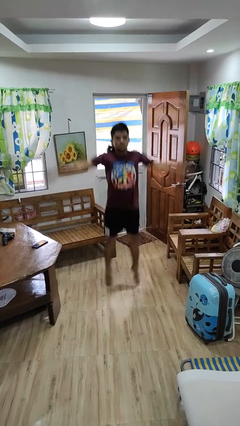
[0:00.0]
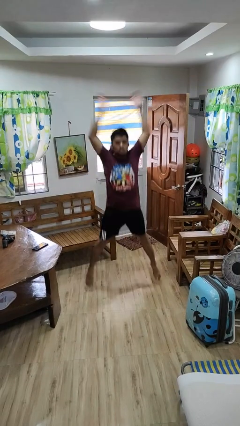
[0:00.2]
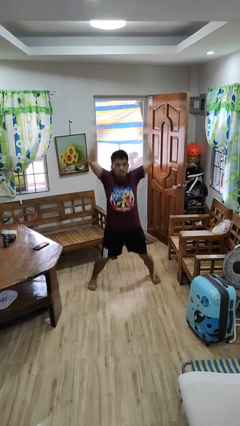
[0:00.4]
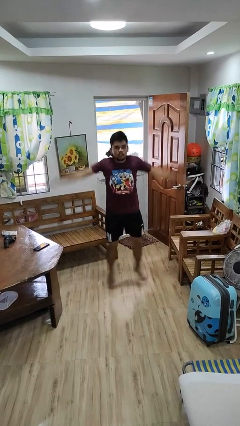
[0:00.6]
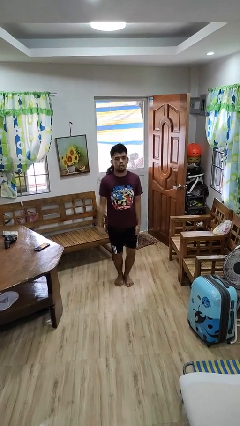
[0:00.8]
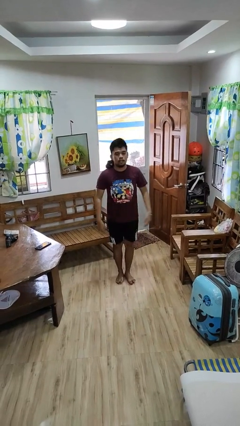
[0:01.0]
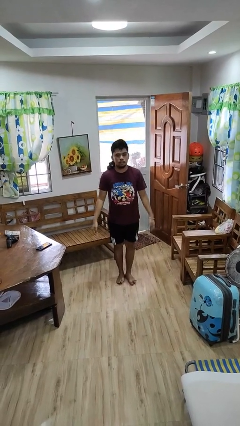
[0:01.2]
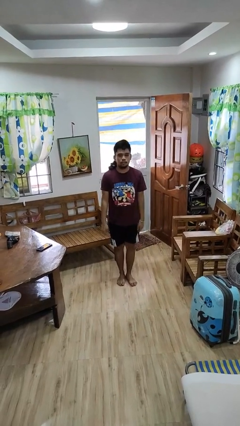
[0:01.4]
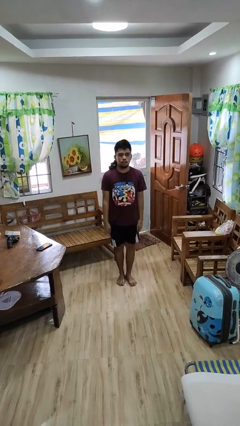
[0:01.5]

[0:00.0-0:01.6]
person exercises with jumping jacks

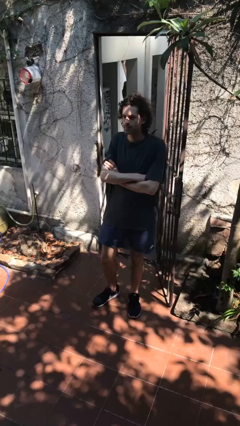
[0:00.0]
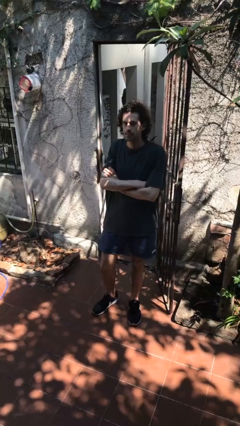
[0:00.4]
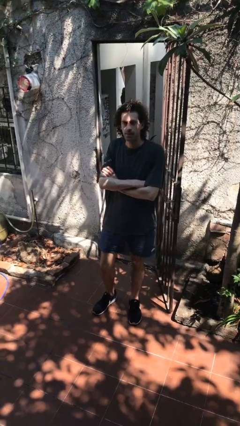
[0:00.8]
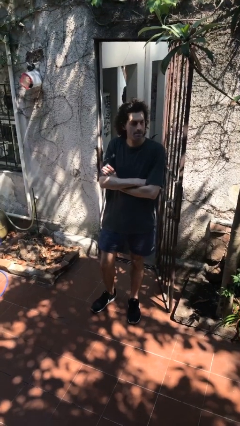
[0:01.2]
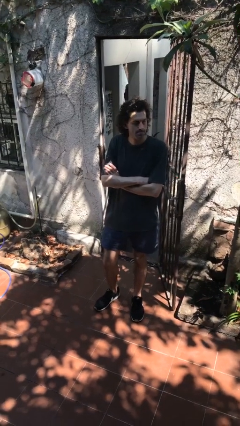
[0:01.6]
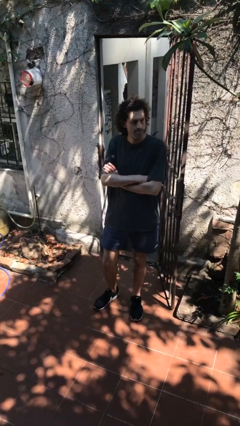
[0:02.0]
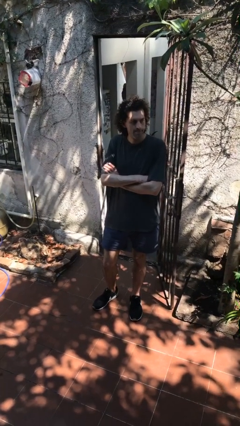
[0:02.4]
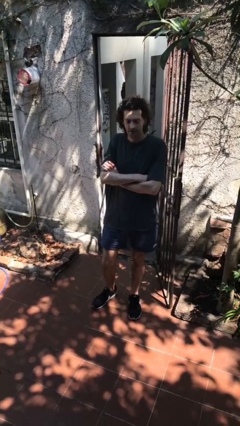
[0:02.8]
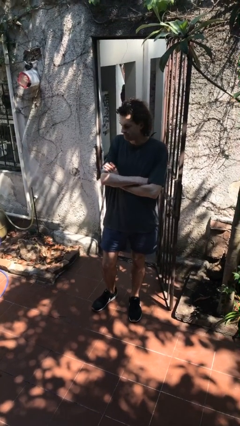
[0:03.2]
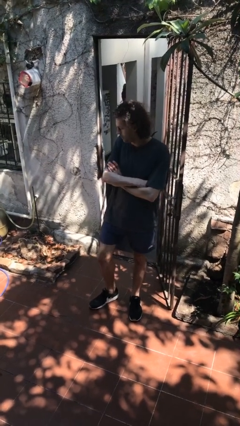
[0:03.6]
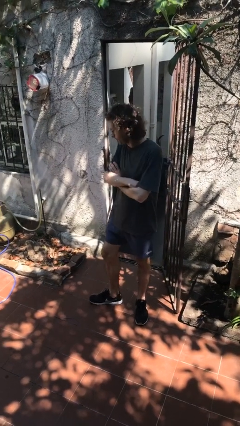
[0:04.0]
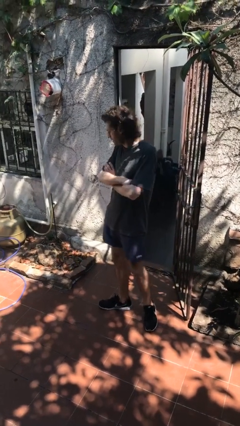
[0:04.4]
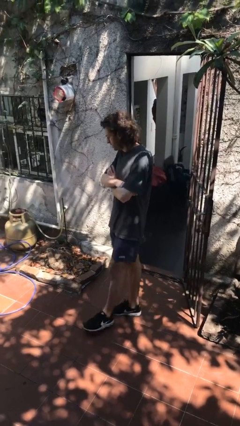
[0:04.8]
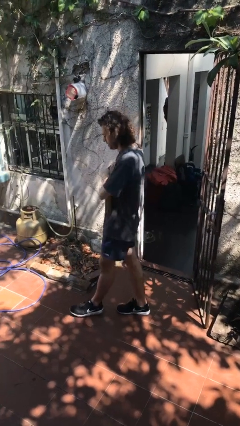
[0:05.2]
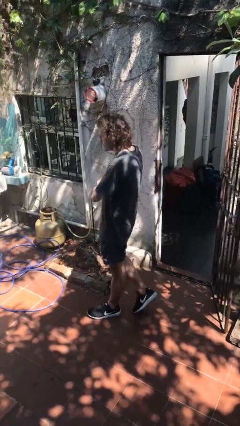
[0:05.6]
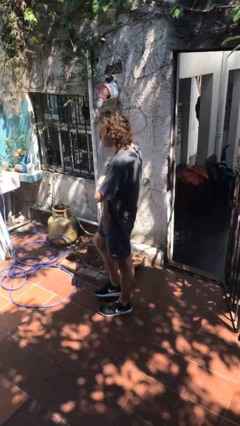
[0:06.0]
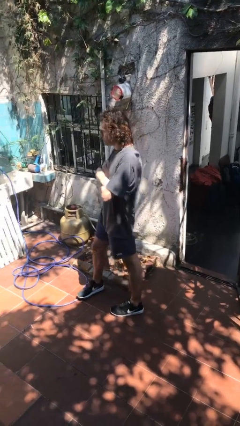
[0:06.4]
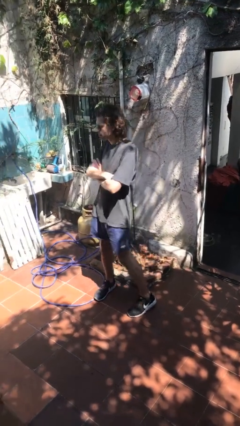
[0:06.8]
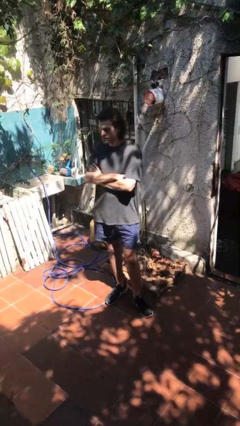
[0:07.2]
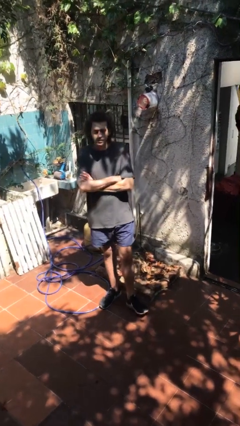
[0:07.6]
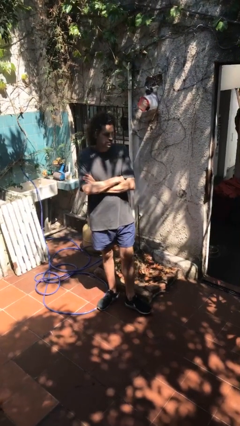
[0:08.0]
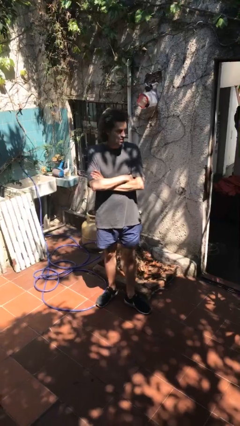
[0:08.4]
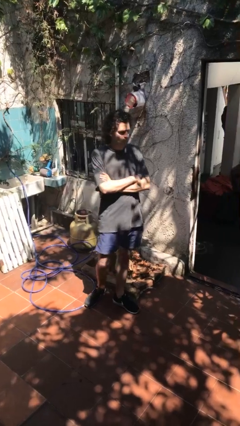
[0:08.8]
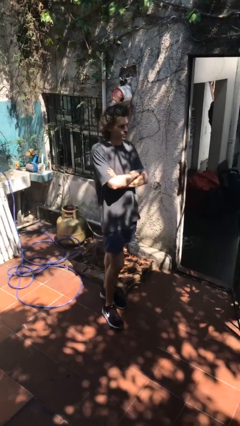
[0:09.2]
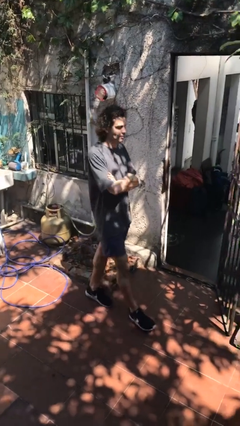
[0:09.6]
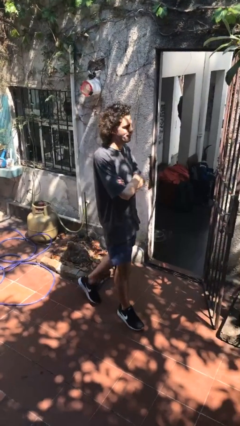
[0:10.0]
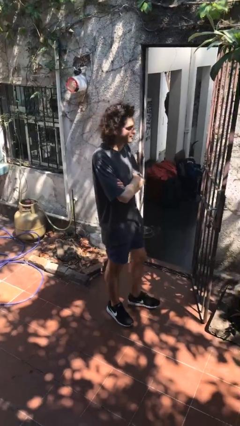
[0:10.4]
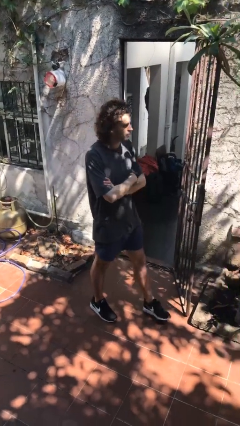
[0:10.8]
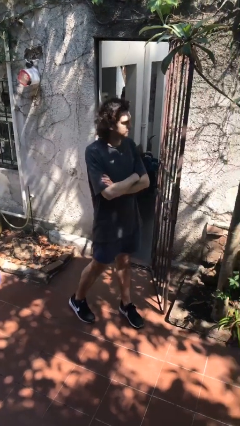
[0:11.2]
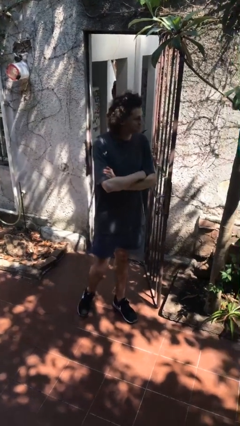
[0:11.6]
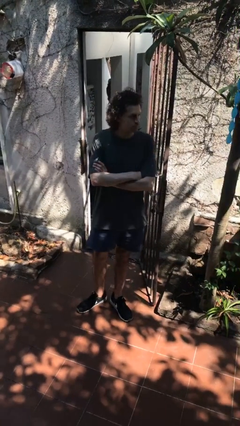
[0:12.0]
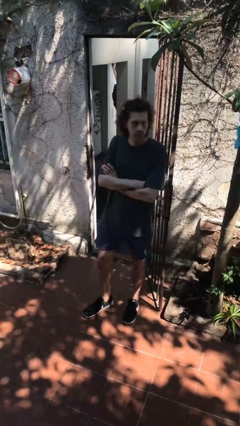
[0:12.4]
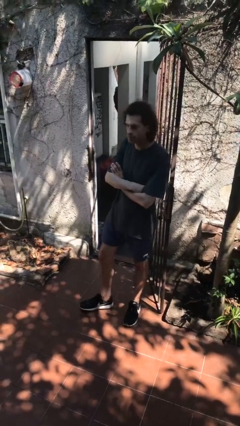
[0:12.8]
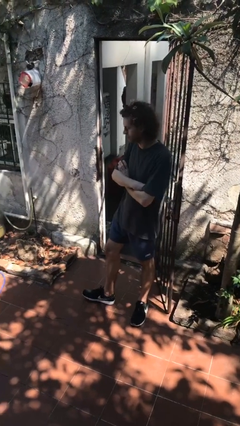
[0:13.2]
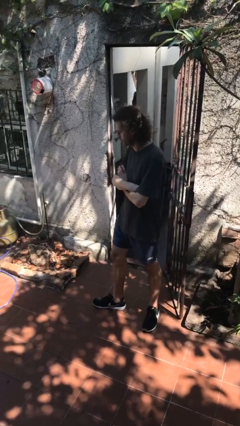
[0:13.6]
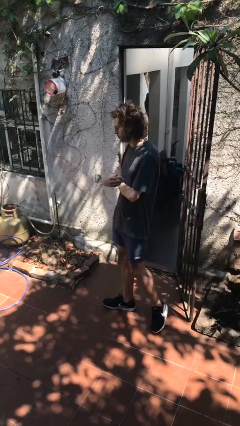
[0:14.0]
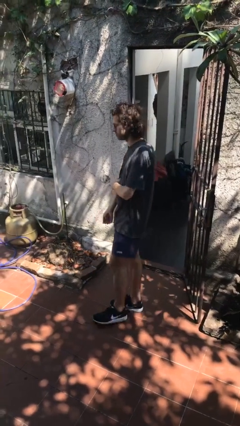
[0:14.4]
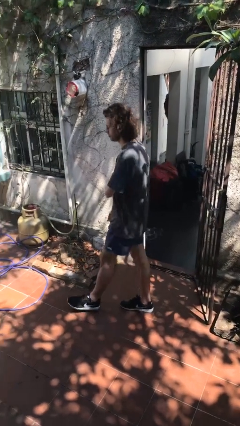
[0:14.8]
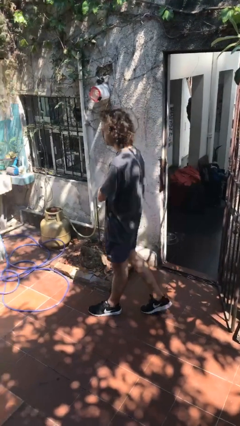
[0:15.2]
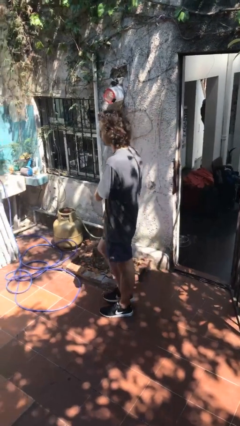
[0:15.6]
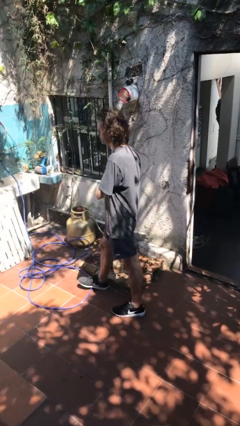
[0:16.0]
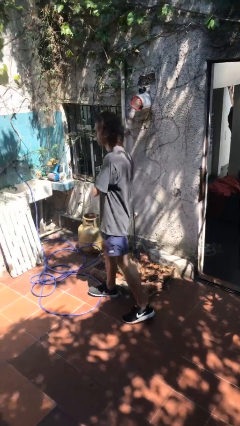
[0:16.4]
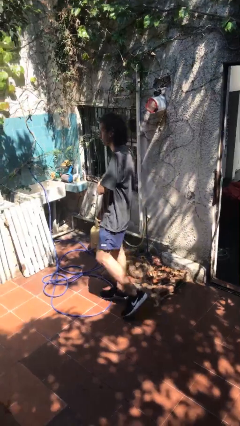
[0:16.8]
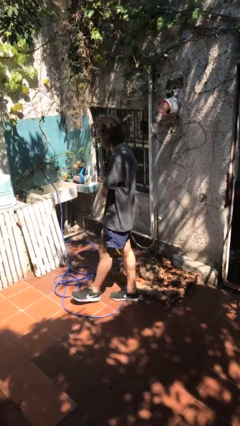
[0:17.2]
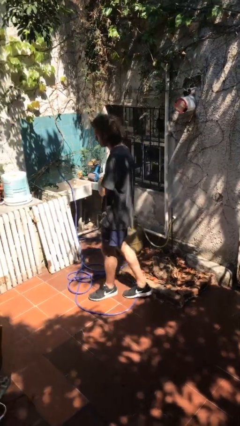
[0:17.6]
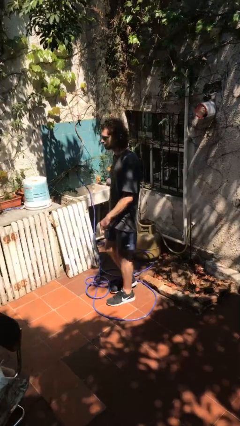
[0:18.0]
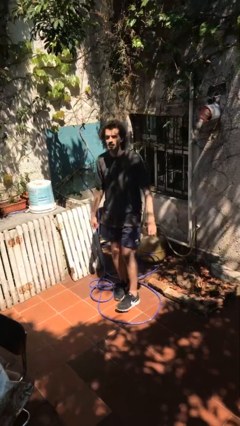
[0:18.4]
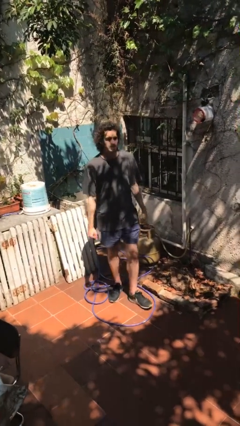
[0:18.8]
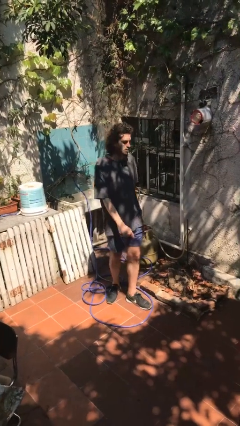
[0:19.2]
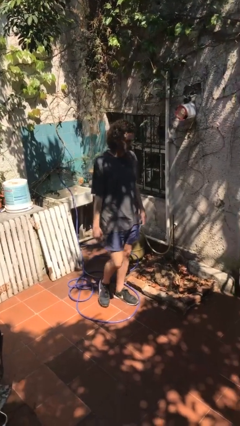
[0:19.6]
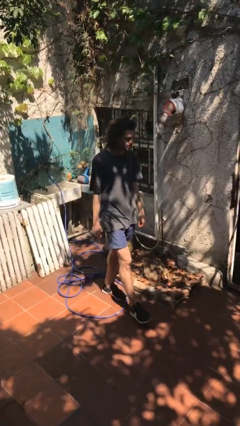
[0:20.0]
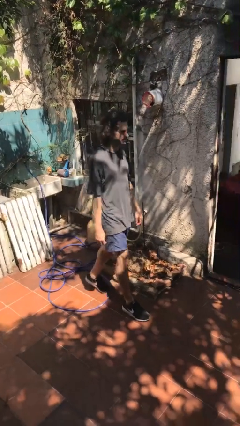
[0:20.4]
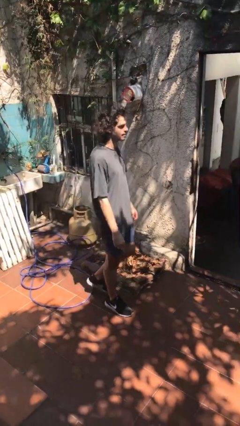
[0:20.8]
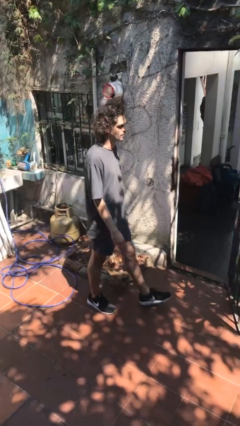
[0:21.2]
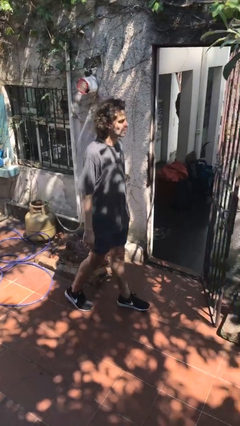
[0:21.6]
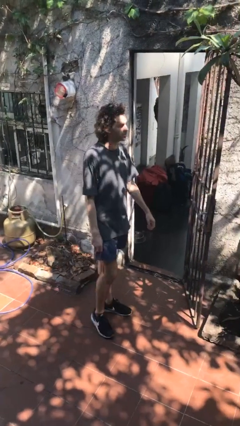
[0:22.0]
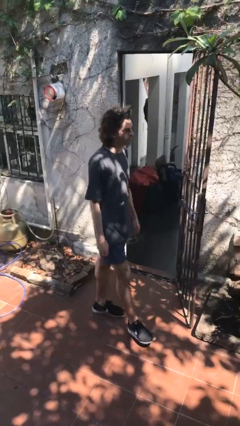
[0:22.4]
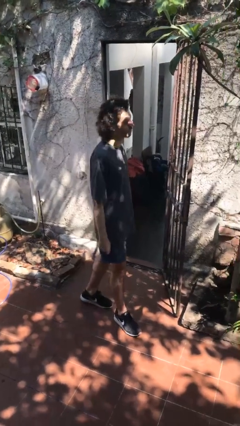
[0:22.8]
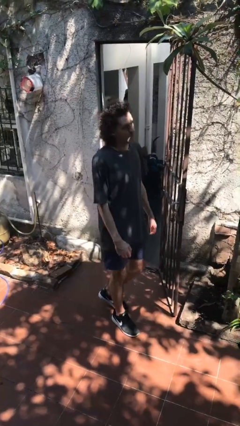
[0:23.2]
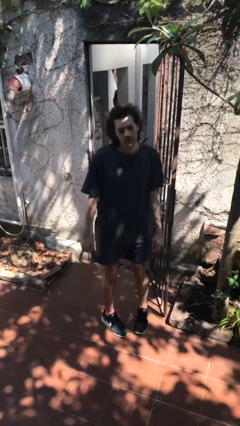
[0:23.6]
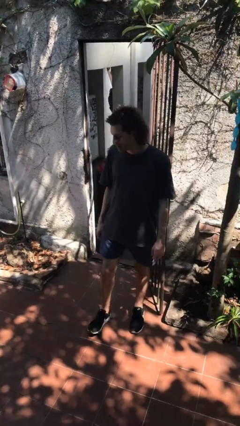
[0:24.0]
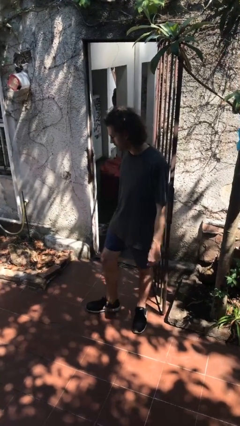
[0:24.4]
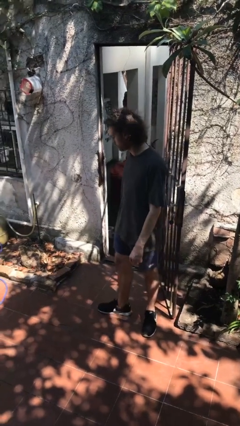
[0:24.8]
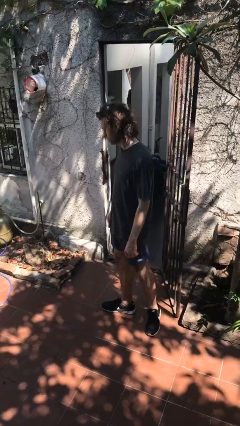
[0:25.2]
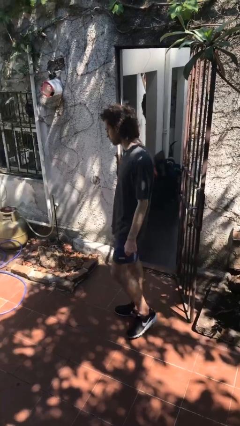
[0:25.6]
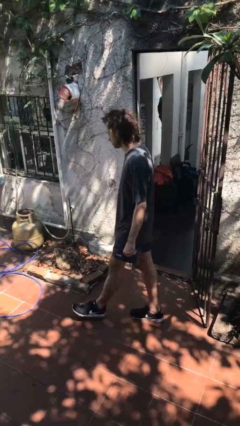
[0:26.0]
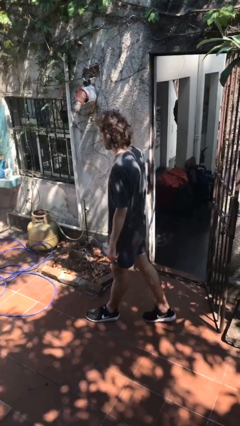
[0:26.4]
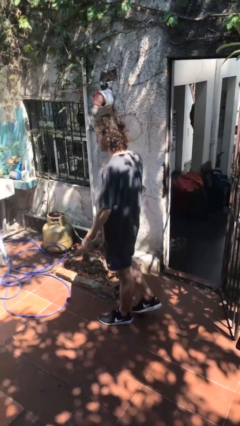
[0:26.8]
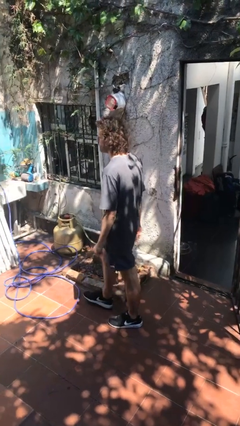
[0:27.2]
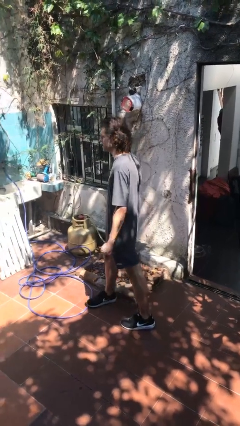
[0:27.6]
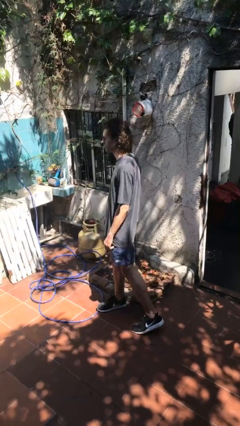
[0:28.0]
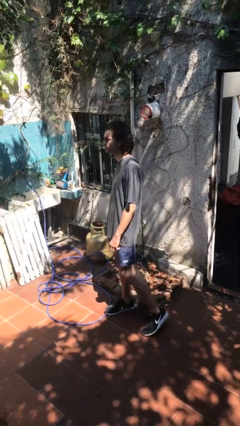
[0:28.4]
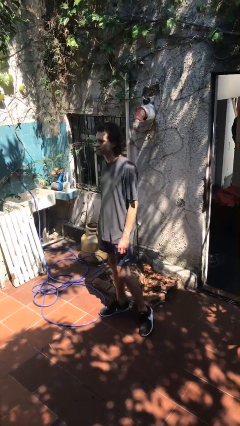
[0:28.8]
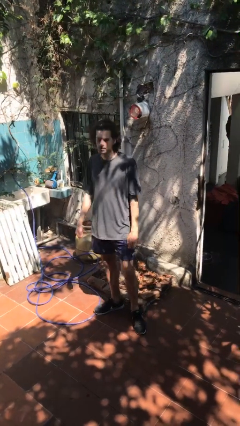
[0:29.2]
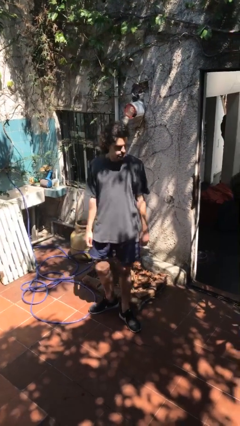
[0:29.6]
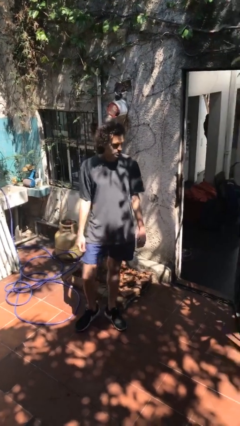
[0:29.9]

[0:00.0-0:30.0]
person walks

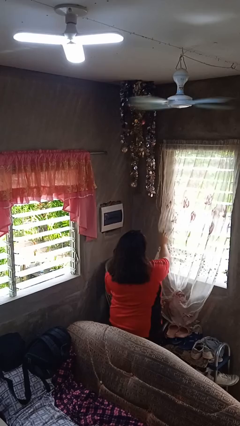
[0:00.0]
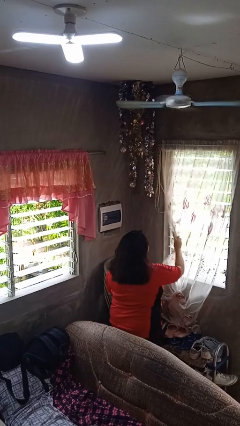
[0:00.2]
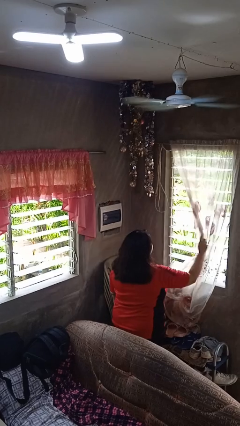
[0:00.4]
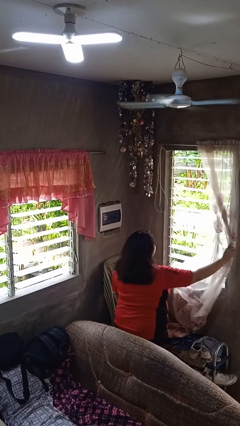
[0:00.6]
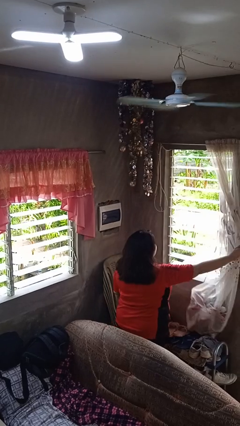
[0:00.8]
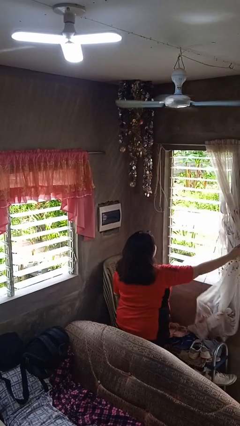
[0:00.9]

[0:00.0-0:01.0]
person opens curtains

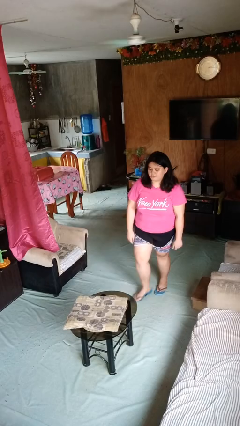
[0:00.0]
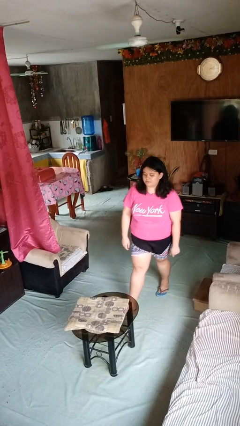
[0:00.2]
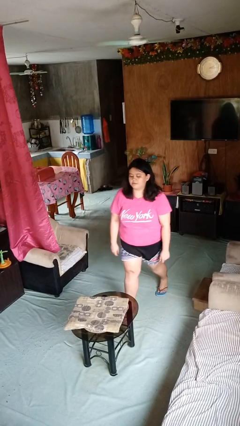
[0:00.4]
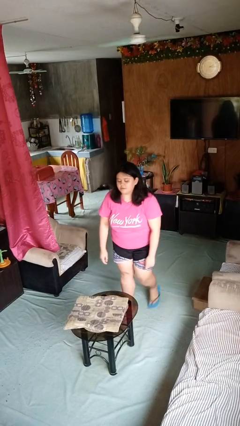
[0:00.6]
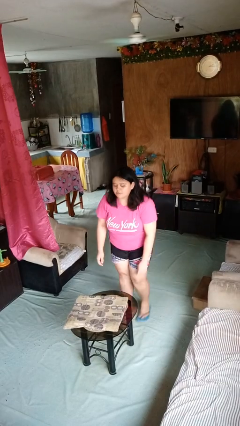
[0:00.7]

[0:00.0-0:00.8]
person picks up object from table
